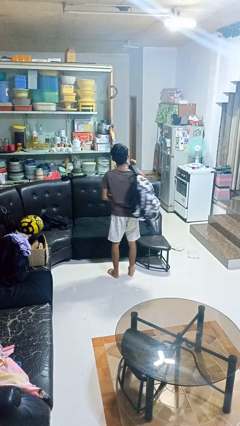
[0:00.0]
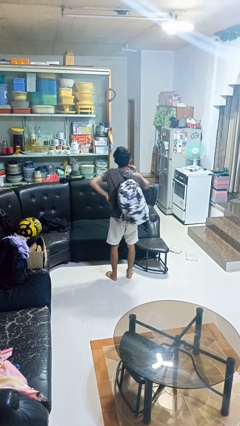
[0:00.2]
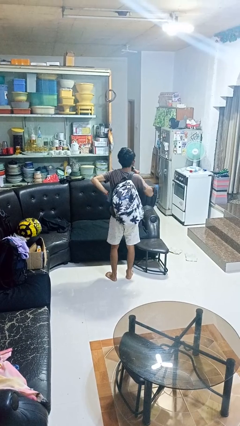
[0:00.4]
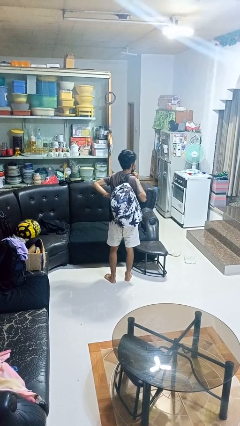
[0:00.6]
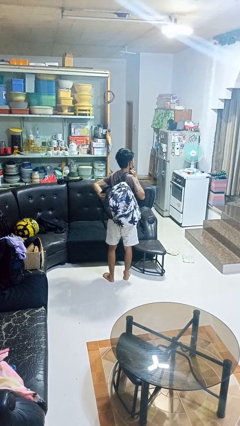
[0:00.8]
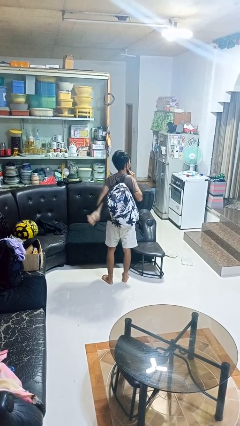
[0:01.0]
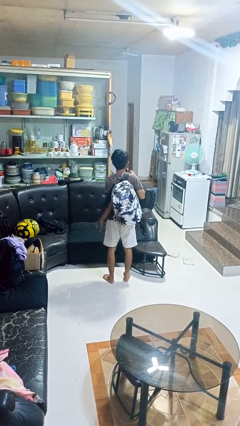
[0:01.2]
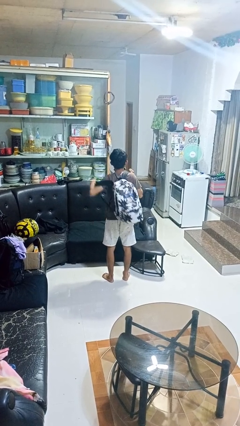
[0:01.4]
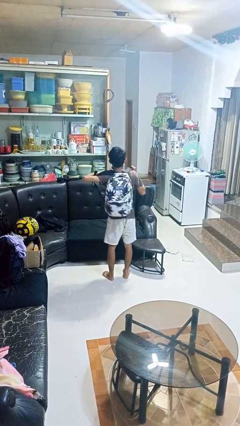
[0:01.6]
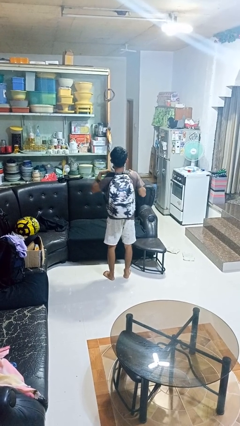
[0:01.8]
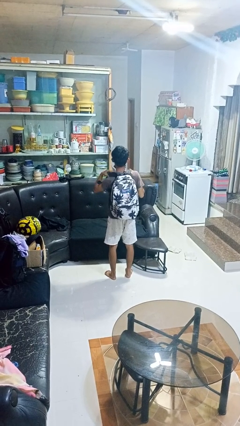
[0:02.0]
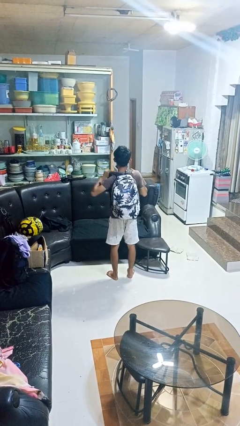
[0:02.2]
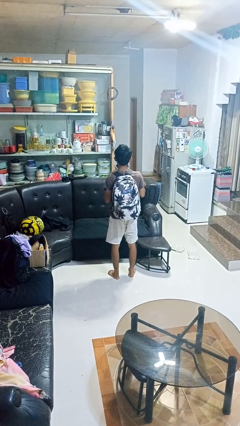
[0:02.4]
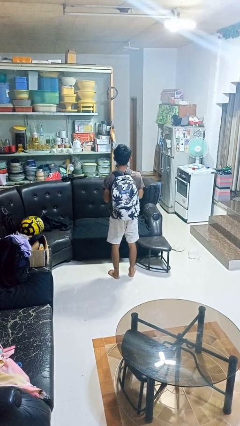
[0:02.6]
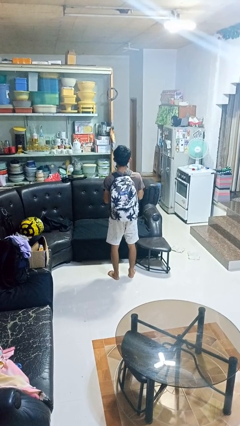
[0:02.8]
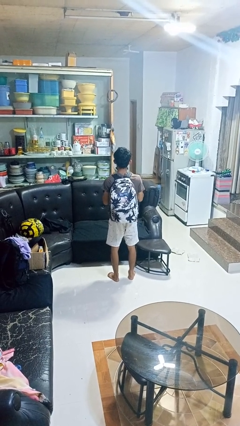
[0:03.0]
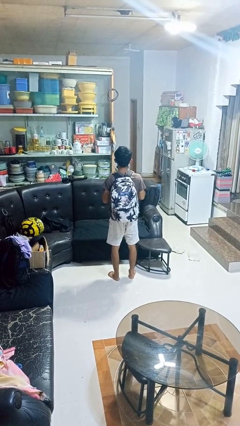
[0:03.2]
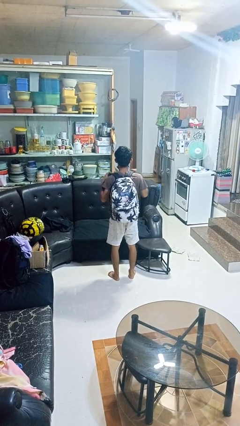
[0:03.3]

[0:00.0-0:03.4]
person puts on backpack

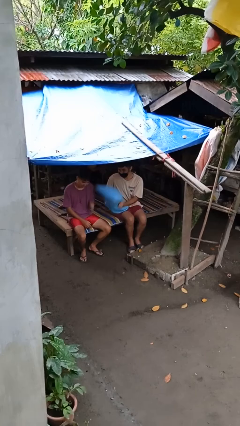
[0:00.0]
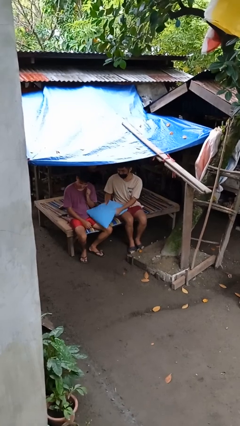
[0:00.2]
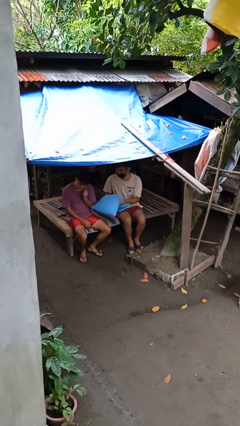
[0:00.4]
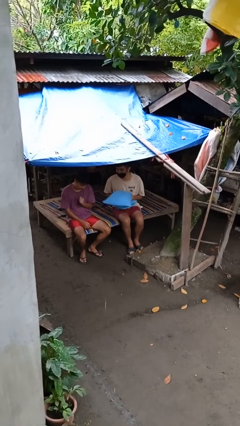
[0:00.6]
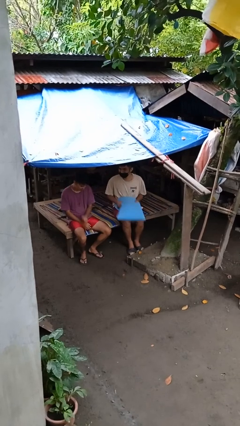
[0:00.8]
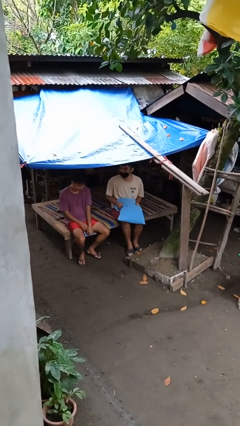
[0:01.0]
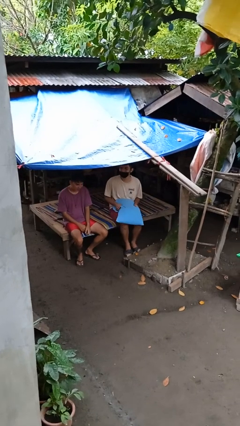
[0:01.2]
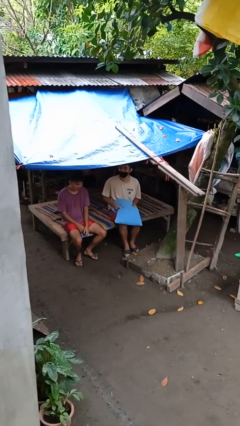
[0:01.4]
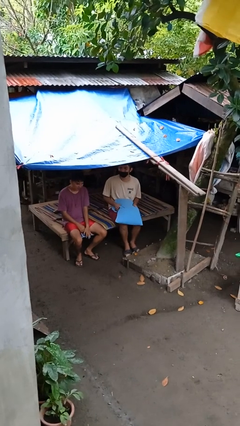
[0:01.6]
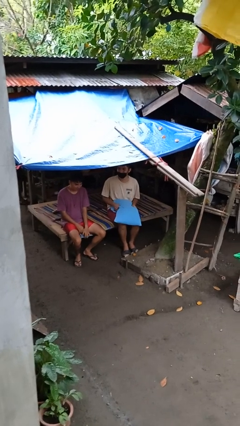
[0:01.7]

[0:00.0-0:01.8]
person hits person with pillow

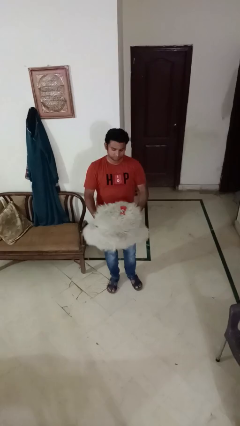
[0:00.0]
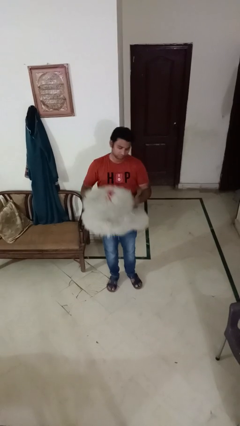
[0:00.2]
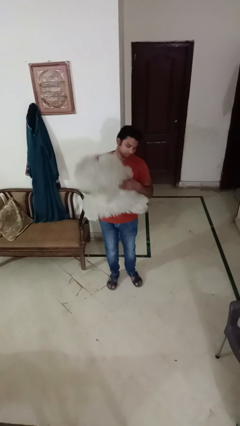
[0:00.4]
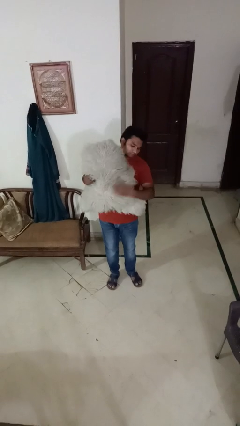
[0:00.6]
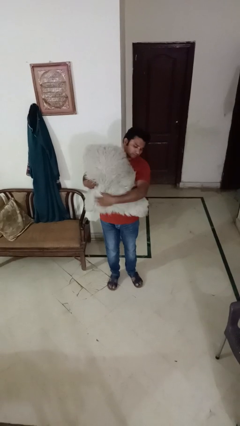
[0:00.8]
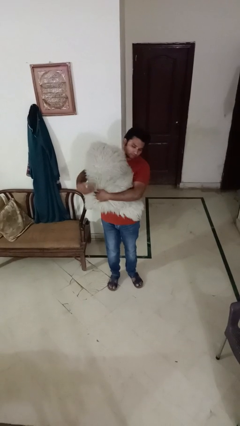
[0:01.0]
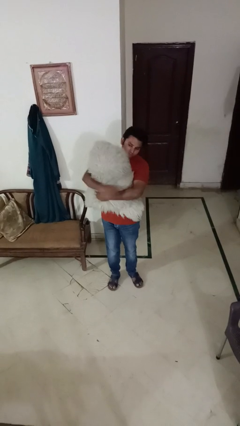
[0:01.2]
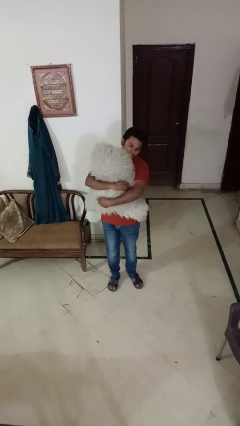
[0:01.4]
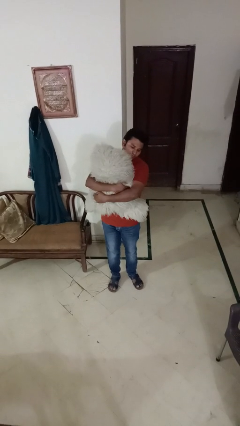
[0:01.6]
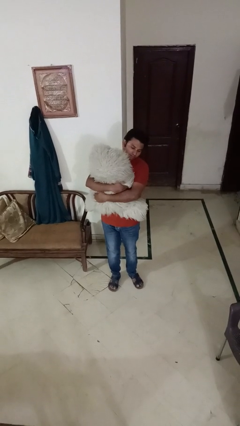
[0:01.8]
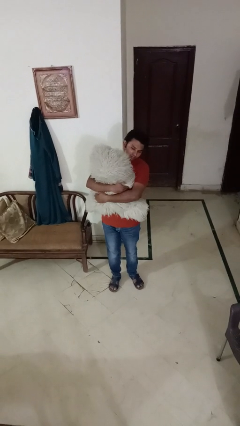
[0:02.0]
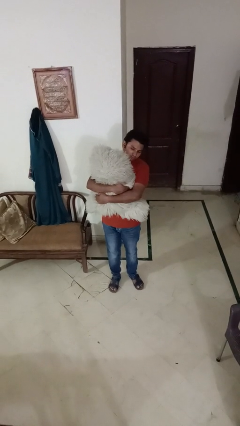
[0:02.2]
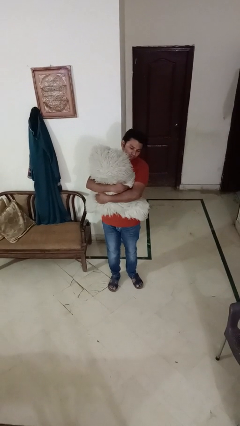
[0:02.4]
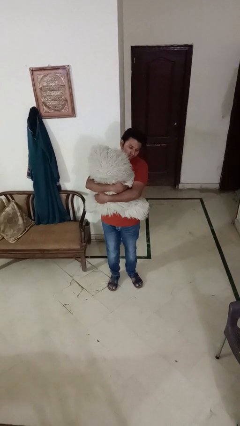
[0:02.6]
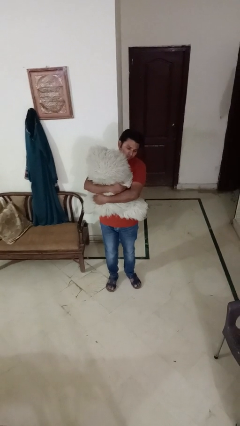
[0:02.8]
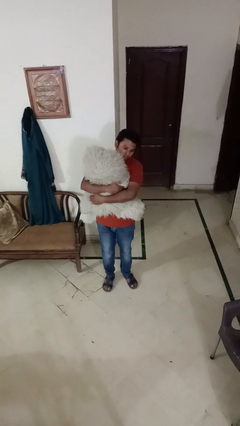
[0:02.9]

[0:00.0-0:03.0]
person hugs stuffed animal

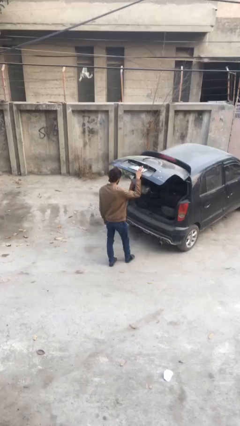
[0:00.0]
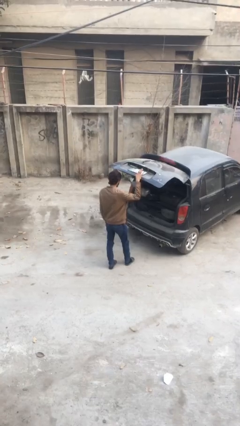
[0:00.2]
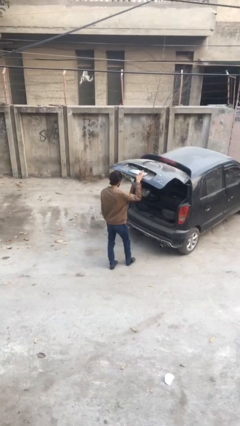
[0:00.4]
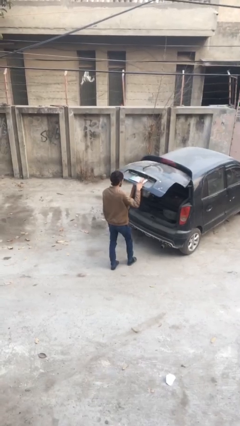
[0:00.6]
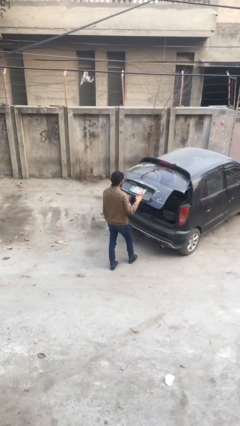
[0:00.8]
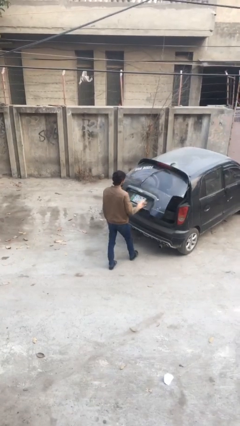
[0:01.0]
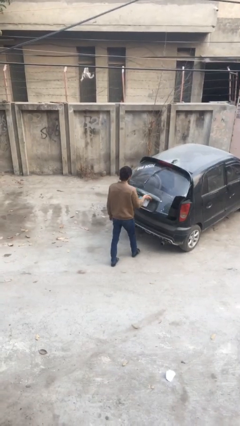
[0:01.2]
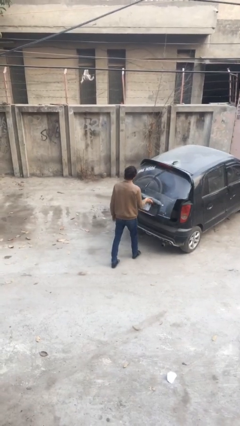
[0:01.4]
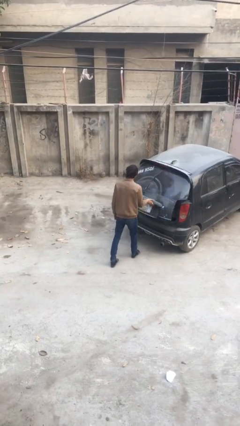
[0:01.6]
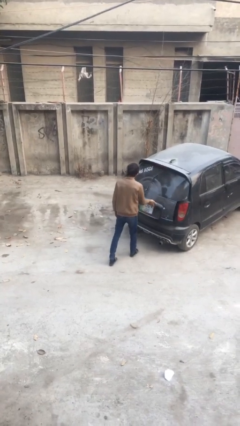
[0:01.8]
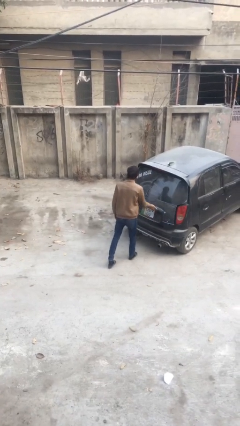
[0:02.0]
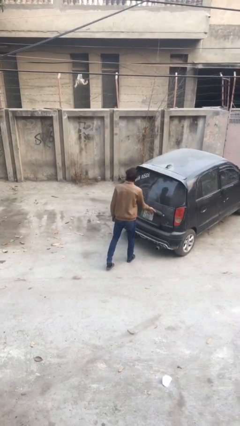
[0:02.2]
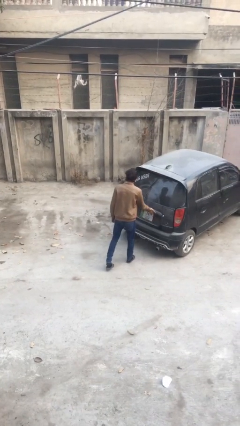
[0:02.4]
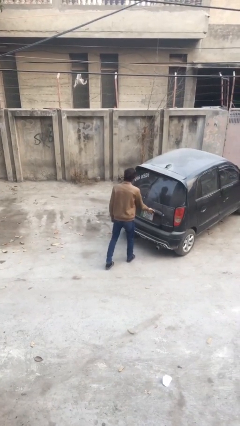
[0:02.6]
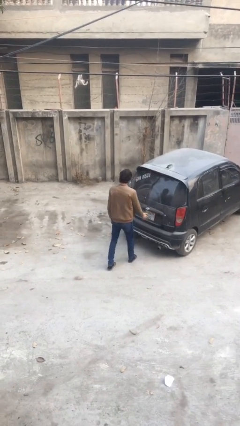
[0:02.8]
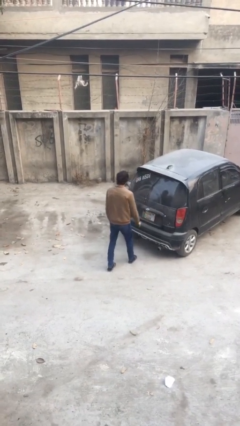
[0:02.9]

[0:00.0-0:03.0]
person closes car trunk

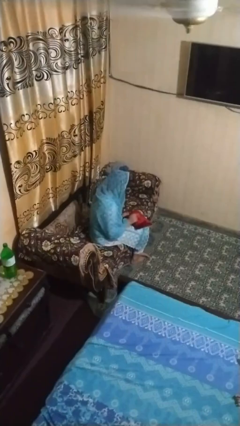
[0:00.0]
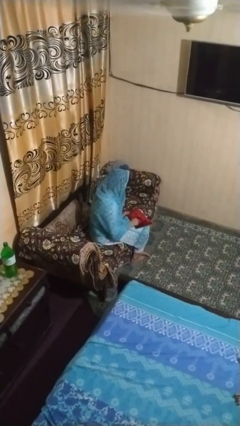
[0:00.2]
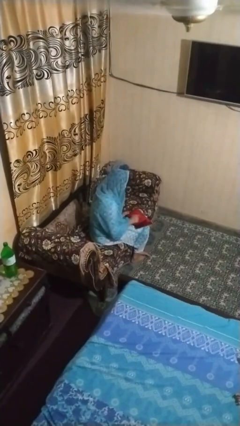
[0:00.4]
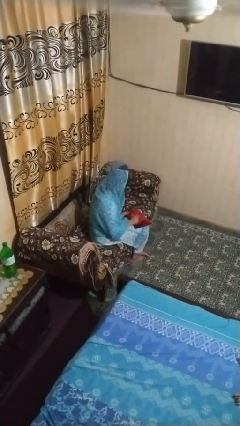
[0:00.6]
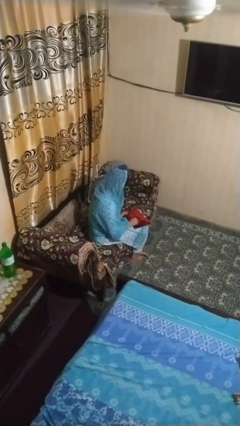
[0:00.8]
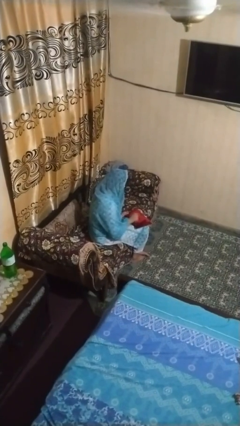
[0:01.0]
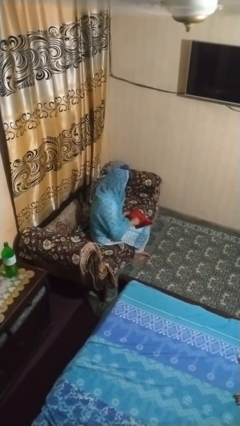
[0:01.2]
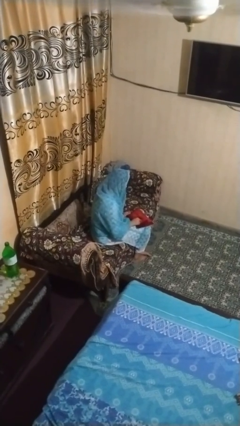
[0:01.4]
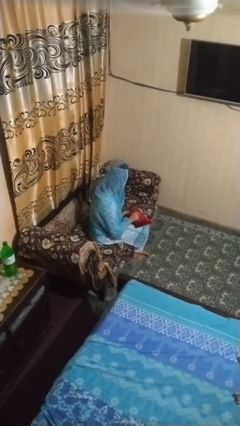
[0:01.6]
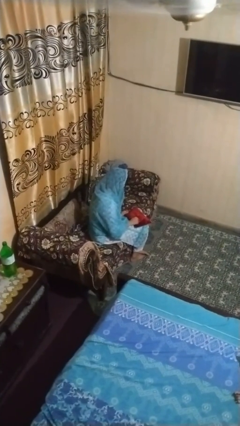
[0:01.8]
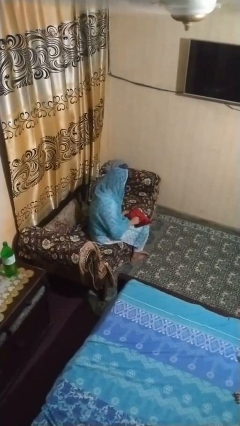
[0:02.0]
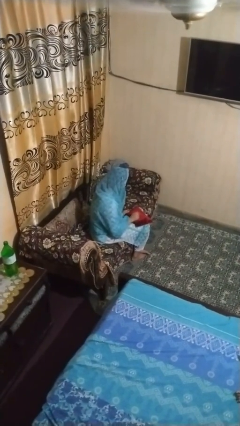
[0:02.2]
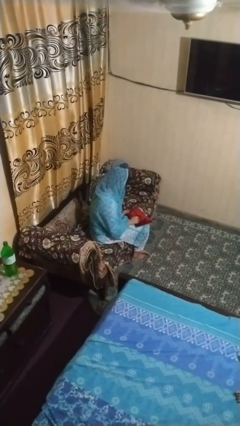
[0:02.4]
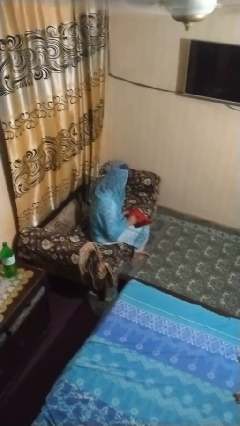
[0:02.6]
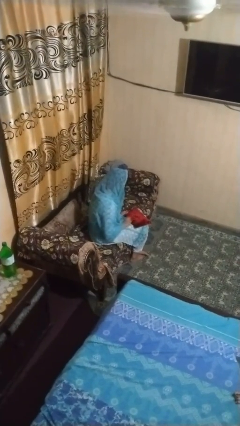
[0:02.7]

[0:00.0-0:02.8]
person taps object with finger

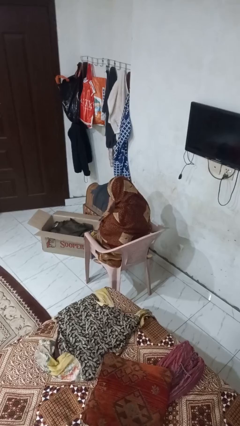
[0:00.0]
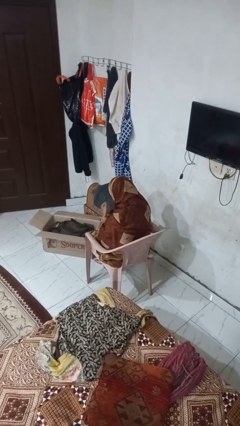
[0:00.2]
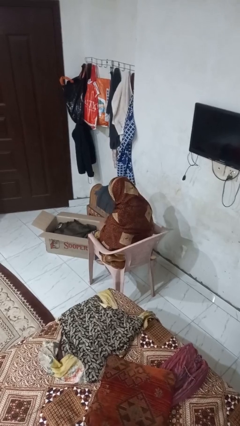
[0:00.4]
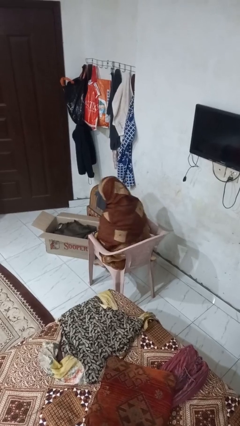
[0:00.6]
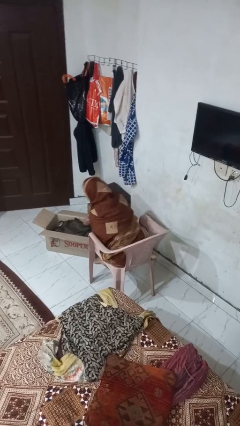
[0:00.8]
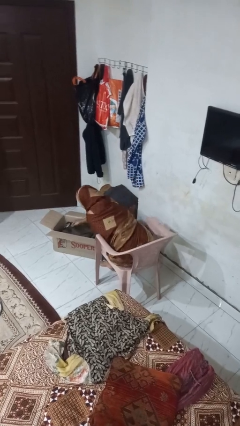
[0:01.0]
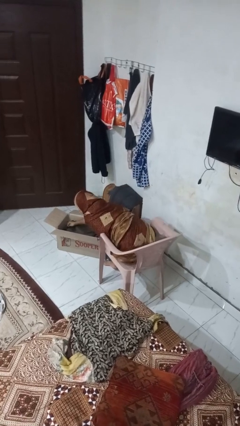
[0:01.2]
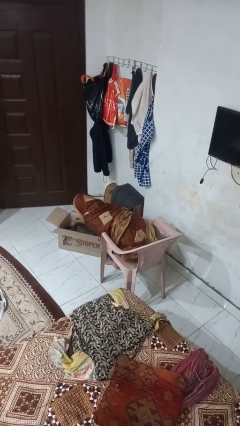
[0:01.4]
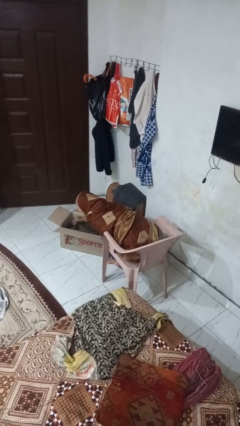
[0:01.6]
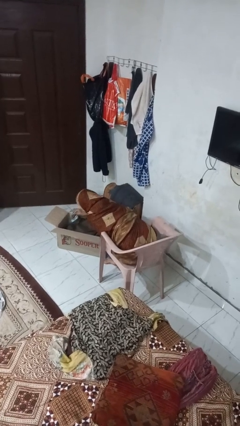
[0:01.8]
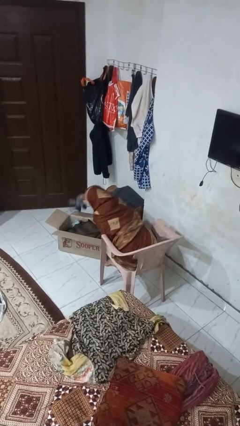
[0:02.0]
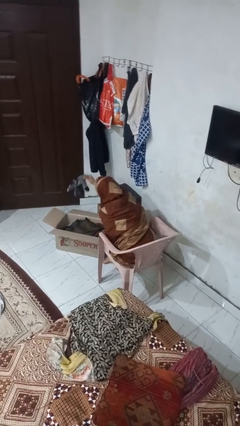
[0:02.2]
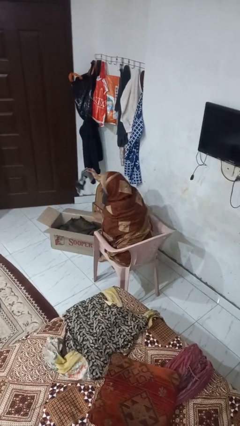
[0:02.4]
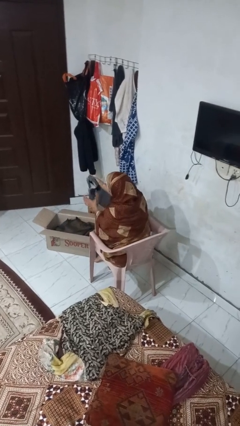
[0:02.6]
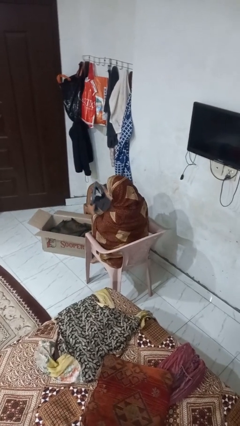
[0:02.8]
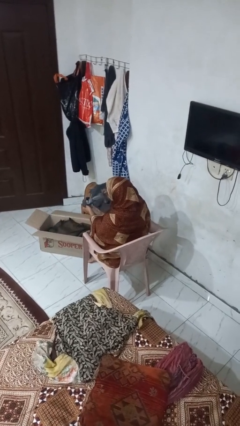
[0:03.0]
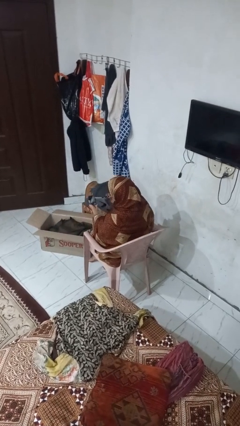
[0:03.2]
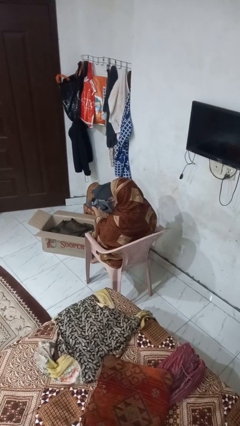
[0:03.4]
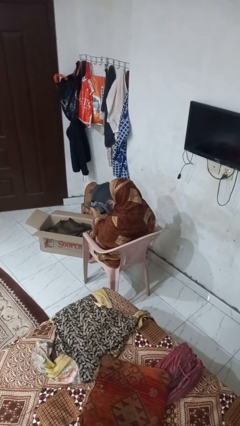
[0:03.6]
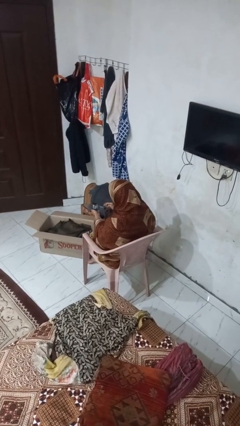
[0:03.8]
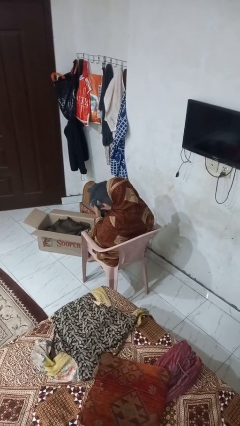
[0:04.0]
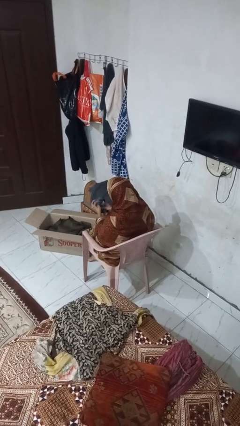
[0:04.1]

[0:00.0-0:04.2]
person takes object from box
